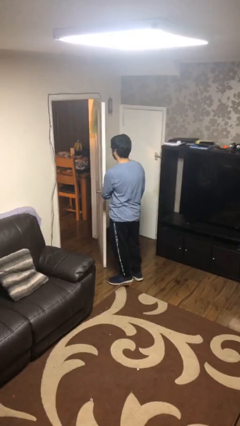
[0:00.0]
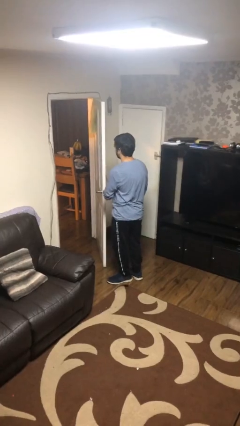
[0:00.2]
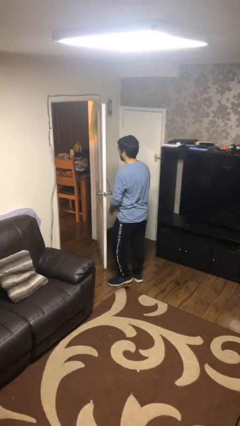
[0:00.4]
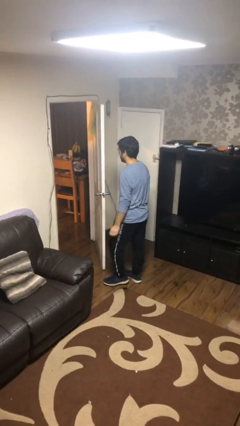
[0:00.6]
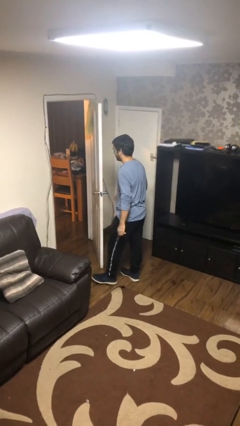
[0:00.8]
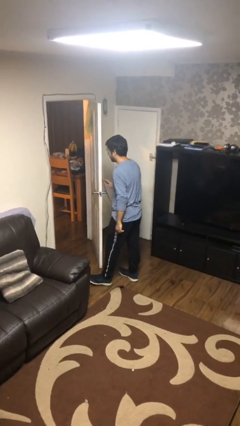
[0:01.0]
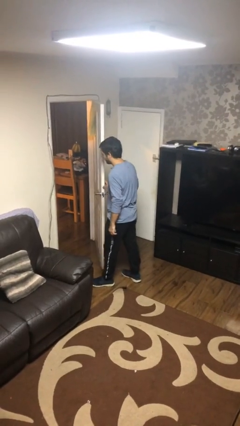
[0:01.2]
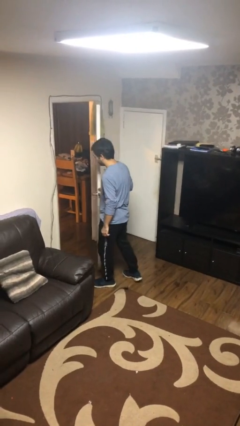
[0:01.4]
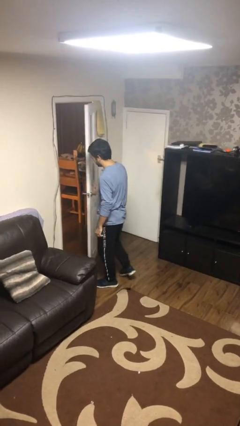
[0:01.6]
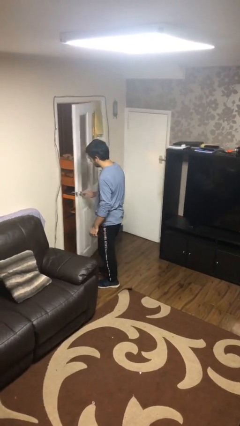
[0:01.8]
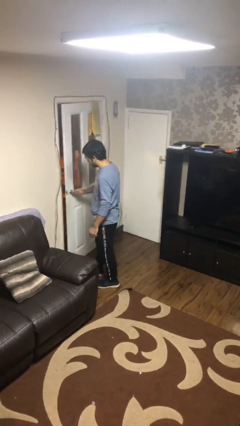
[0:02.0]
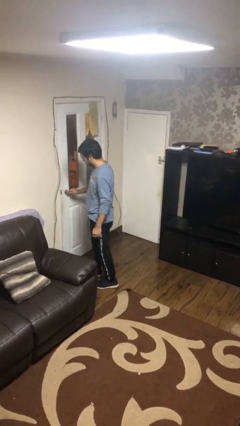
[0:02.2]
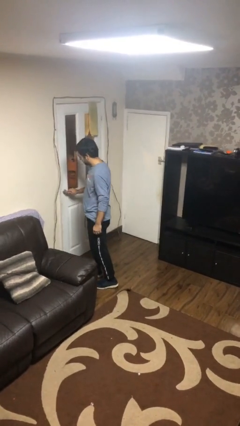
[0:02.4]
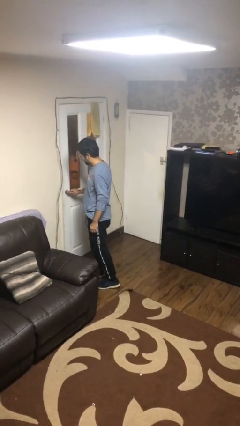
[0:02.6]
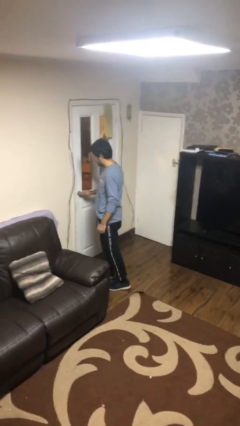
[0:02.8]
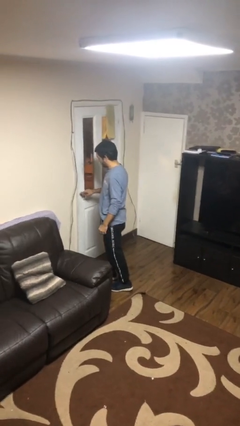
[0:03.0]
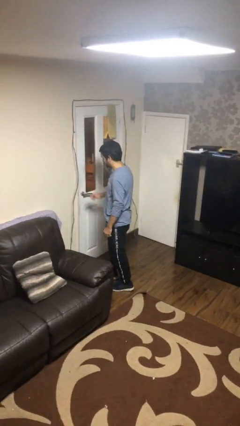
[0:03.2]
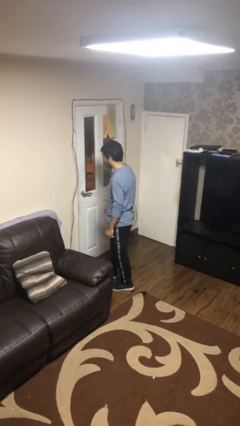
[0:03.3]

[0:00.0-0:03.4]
person closes facility door

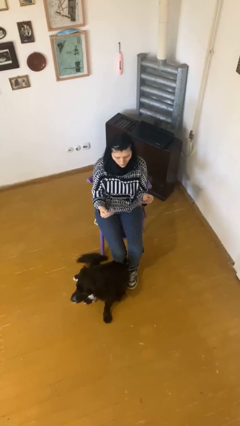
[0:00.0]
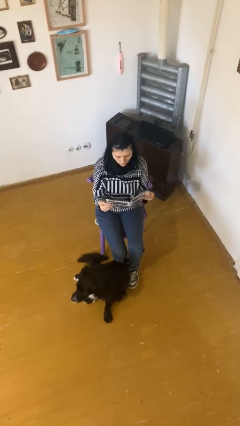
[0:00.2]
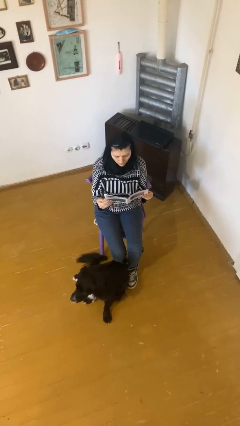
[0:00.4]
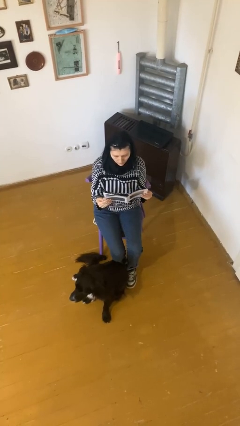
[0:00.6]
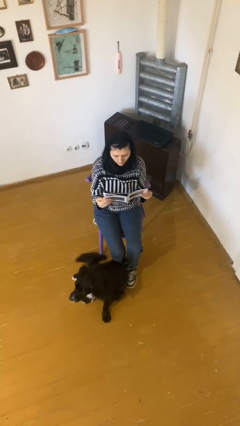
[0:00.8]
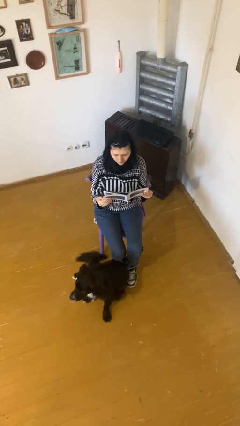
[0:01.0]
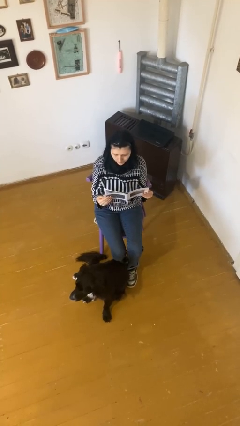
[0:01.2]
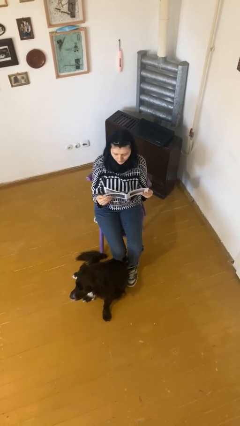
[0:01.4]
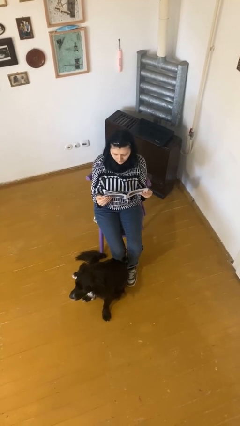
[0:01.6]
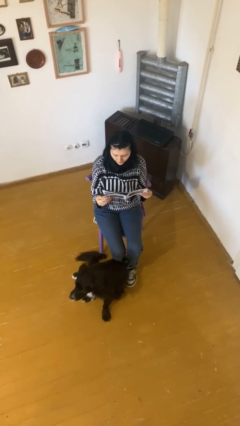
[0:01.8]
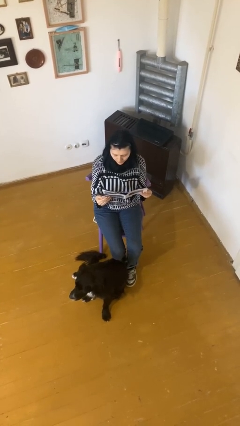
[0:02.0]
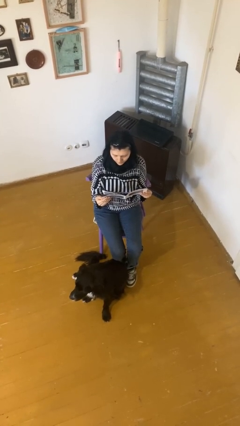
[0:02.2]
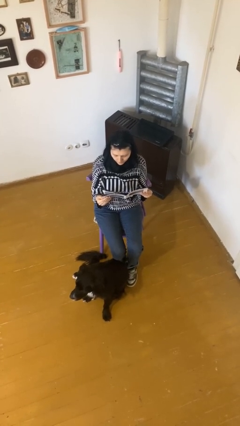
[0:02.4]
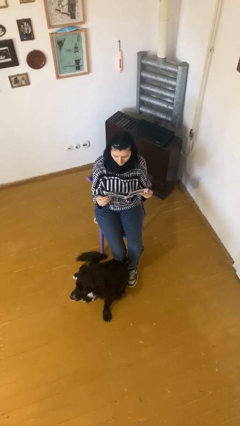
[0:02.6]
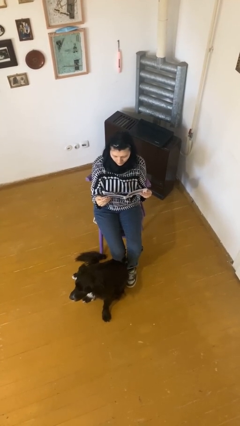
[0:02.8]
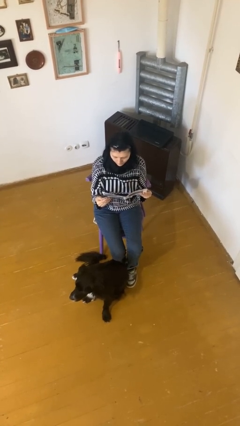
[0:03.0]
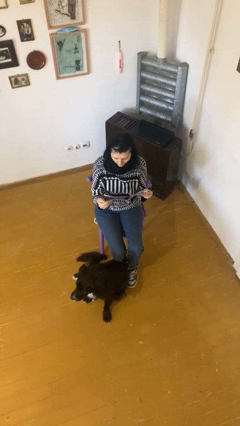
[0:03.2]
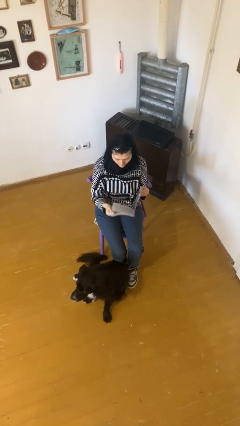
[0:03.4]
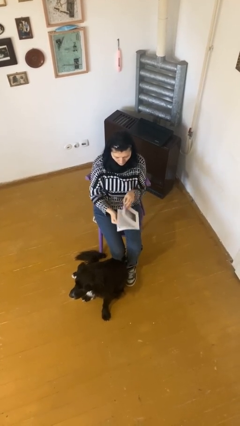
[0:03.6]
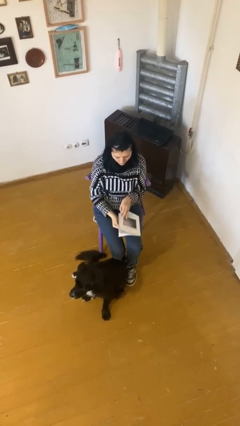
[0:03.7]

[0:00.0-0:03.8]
person reads document

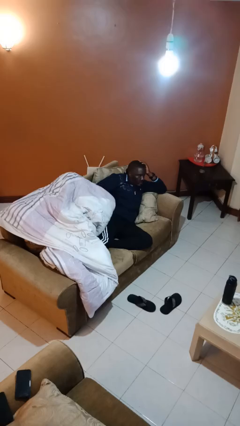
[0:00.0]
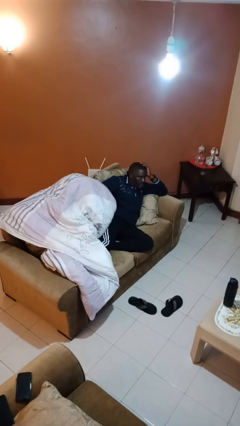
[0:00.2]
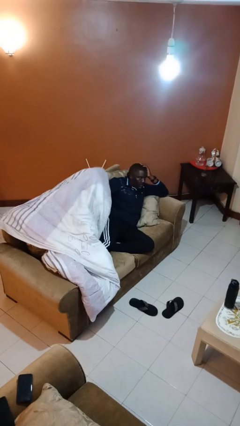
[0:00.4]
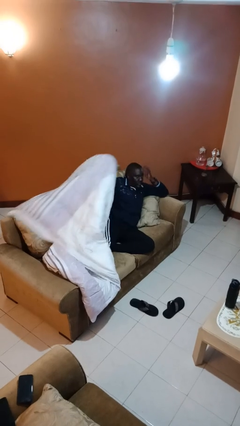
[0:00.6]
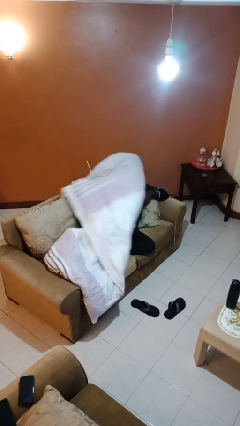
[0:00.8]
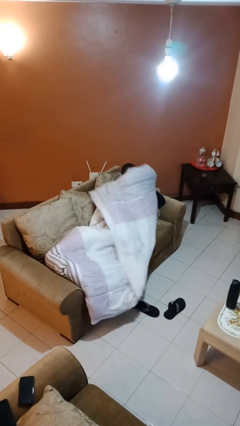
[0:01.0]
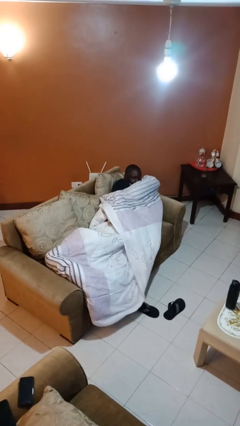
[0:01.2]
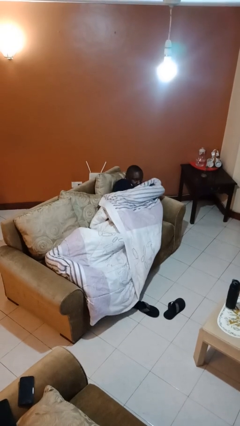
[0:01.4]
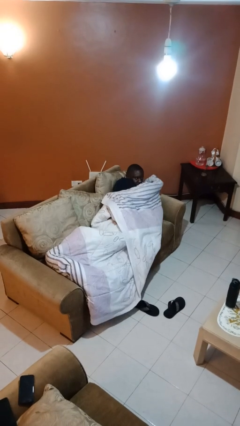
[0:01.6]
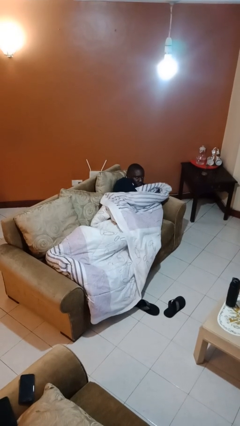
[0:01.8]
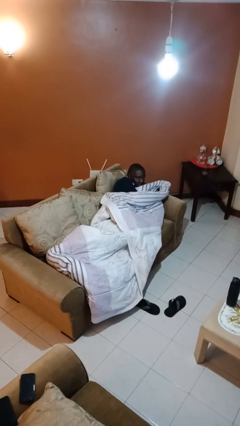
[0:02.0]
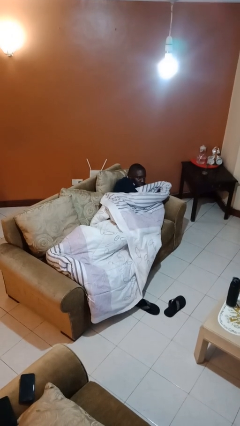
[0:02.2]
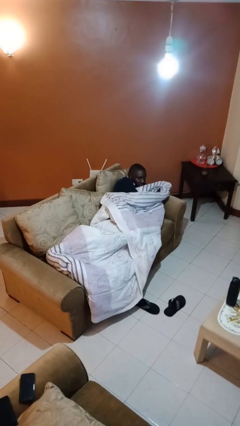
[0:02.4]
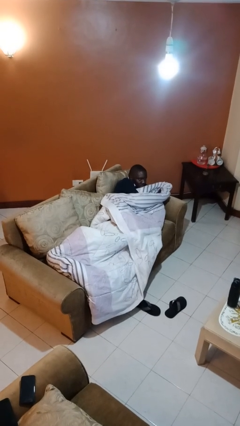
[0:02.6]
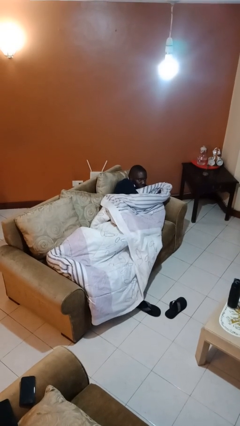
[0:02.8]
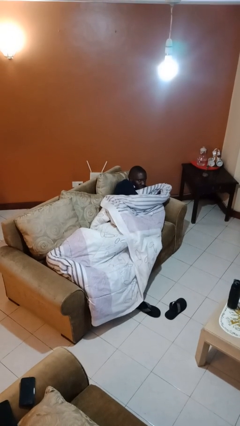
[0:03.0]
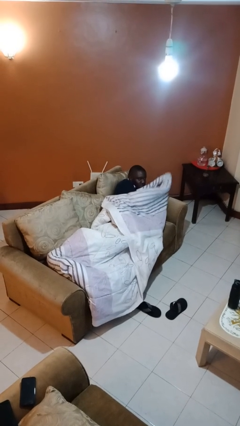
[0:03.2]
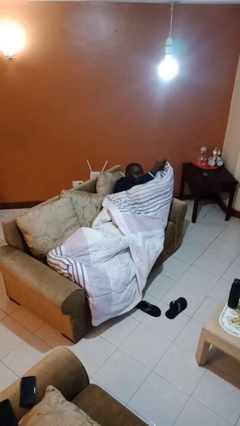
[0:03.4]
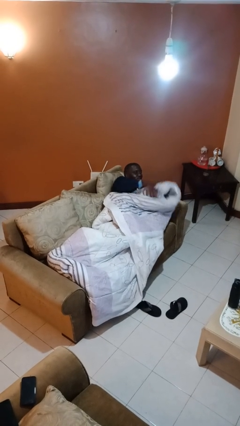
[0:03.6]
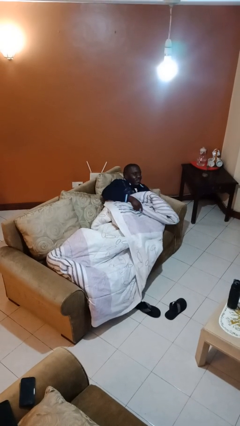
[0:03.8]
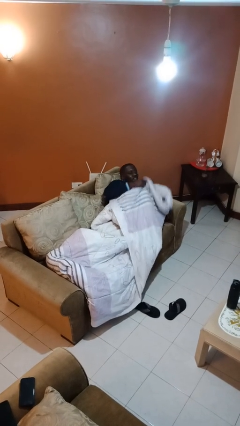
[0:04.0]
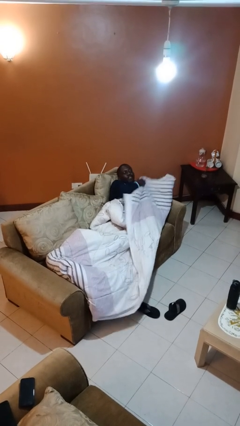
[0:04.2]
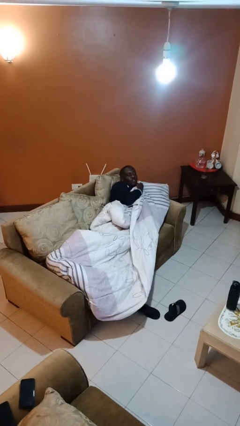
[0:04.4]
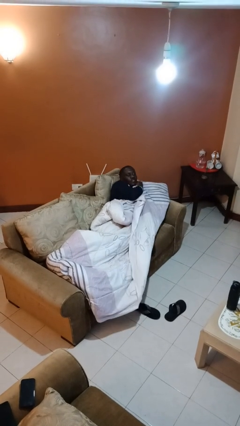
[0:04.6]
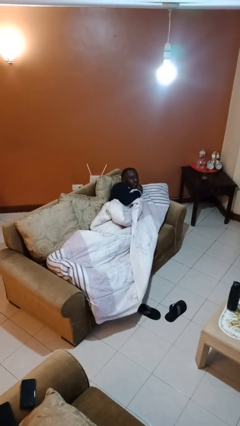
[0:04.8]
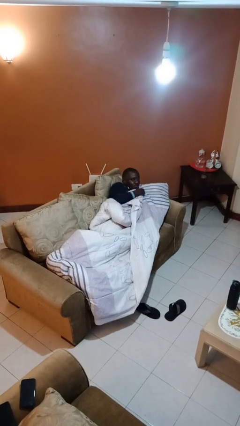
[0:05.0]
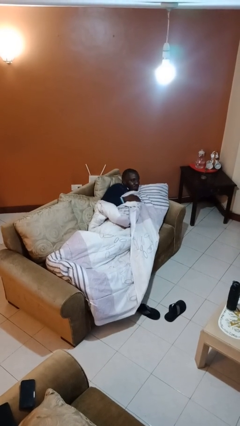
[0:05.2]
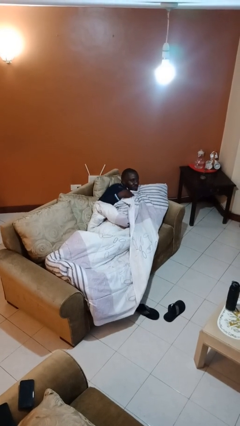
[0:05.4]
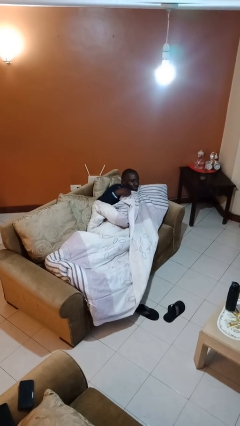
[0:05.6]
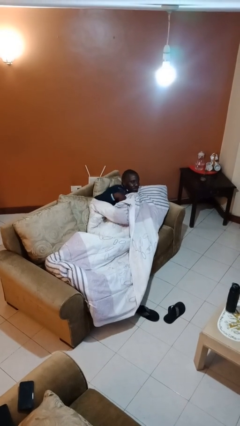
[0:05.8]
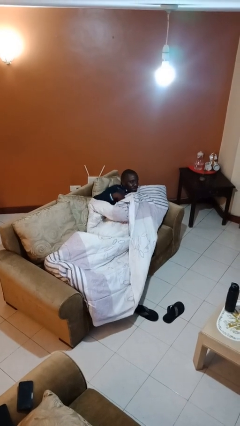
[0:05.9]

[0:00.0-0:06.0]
person covers with blanket

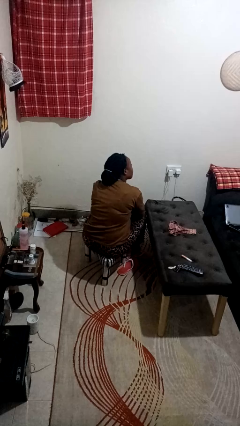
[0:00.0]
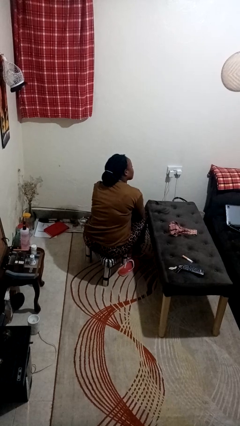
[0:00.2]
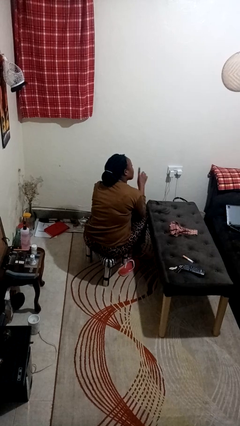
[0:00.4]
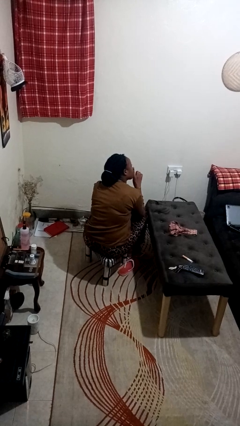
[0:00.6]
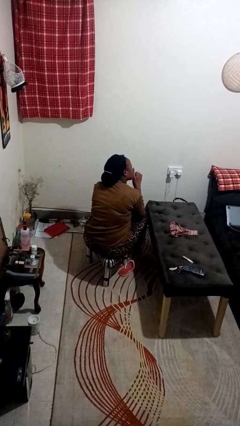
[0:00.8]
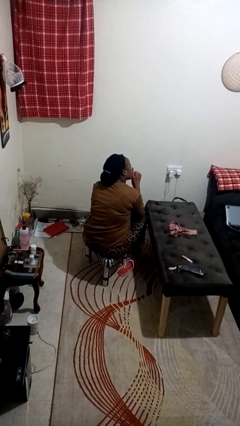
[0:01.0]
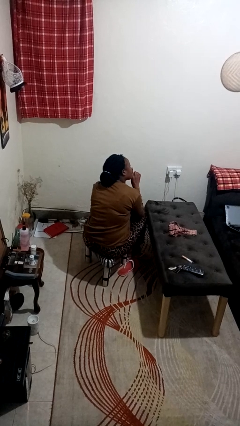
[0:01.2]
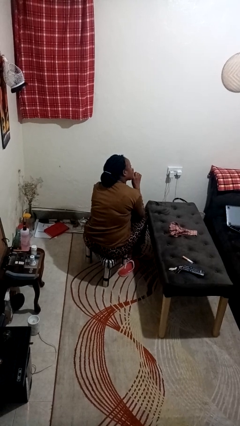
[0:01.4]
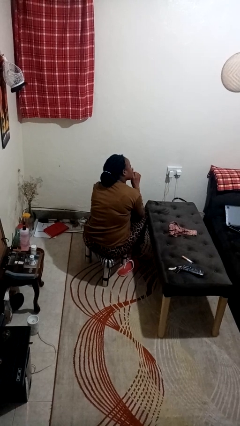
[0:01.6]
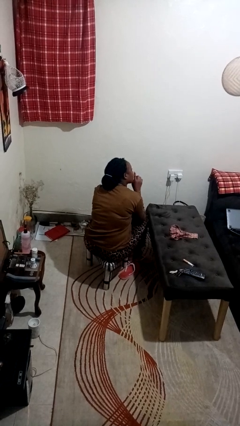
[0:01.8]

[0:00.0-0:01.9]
person gestures be quiet

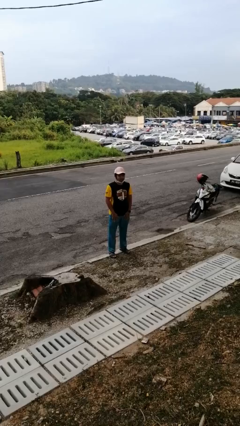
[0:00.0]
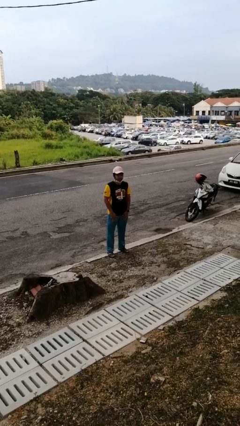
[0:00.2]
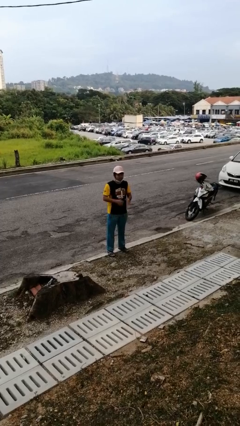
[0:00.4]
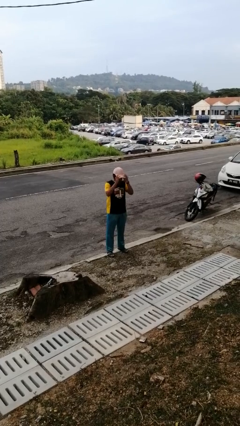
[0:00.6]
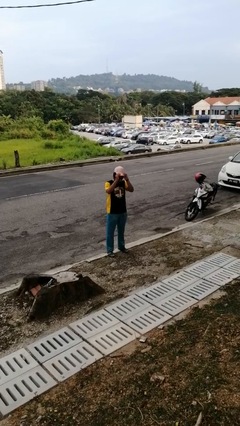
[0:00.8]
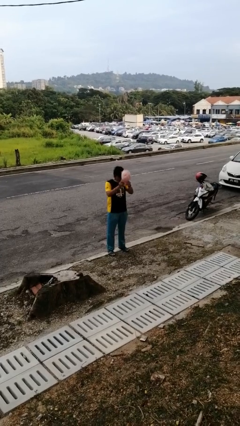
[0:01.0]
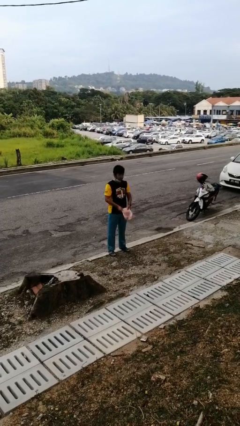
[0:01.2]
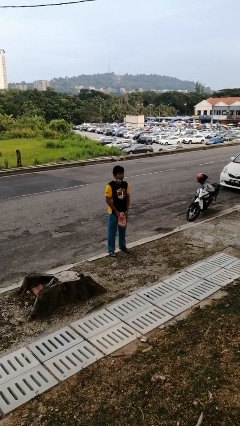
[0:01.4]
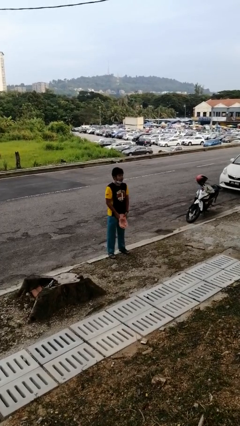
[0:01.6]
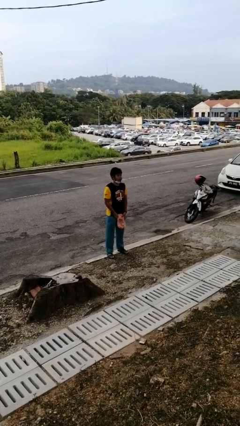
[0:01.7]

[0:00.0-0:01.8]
person takes off hat

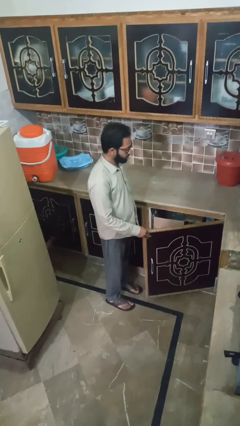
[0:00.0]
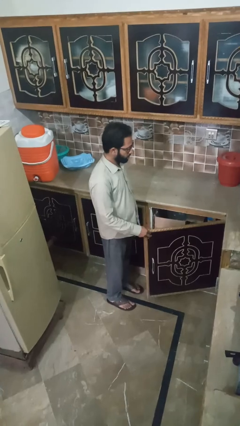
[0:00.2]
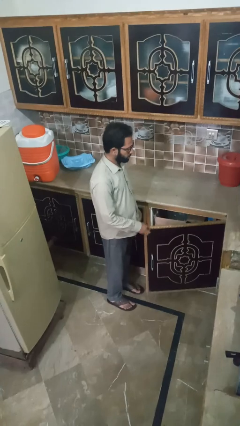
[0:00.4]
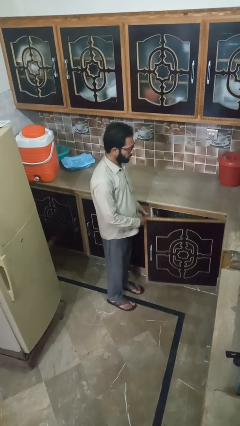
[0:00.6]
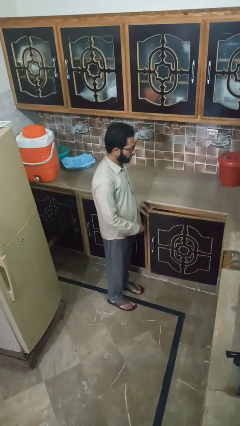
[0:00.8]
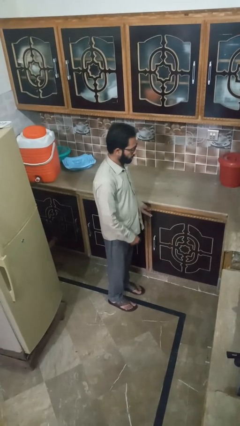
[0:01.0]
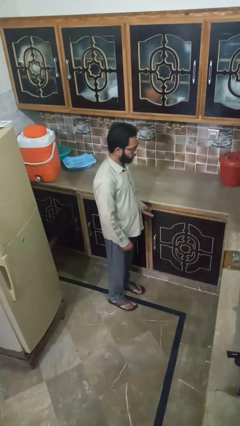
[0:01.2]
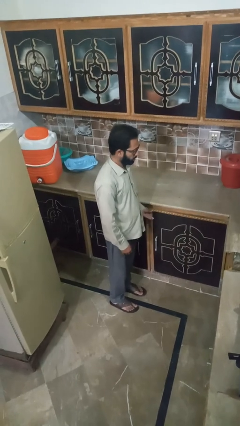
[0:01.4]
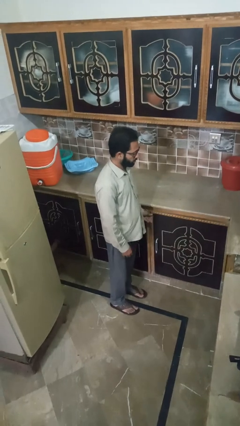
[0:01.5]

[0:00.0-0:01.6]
person closes cabinet
